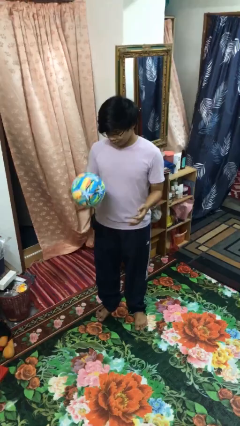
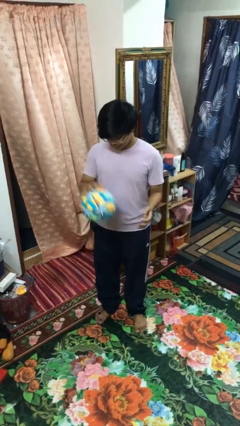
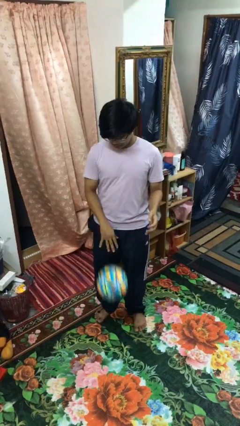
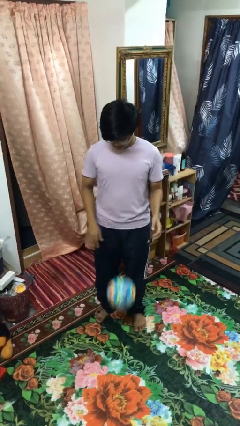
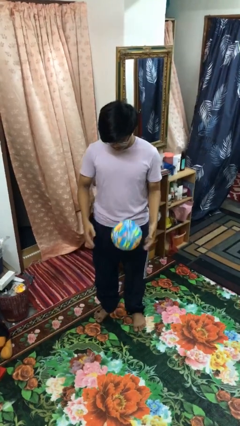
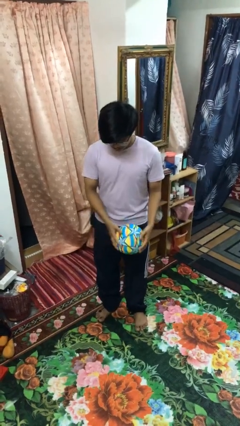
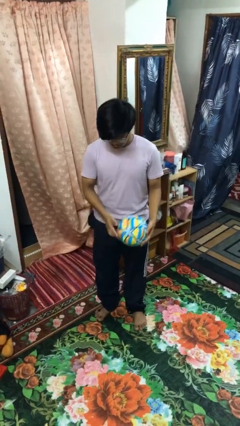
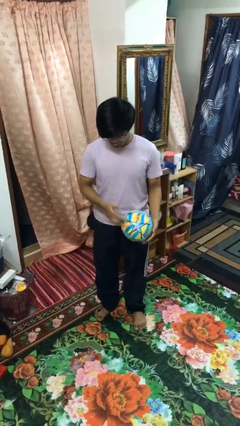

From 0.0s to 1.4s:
person bounces ball on floor

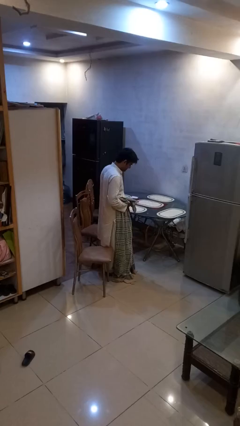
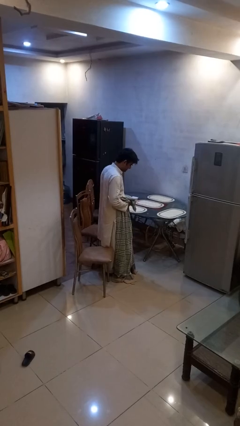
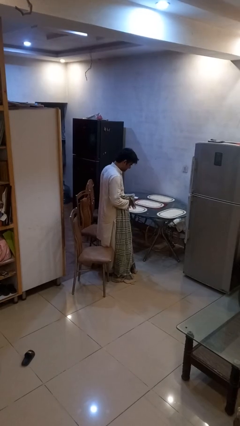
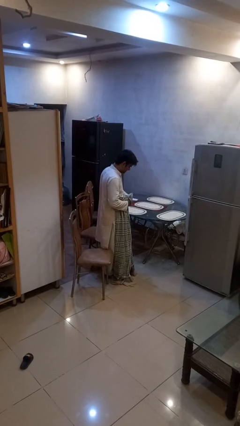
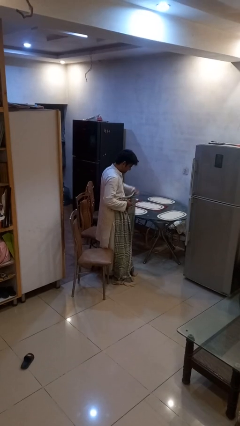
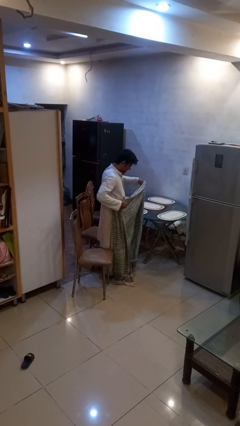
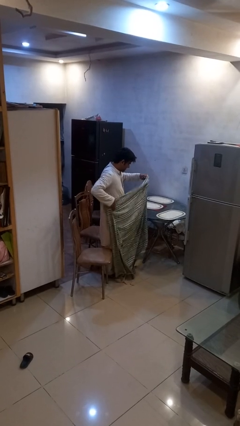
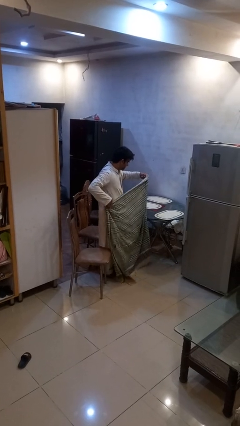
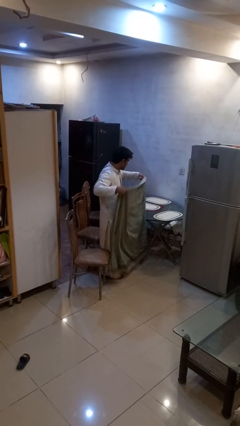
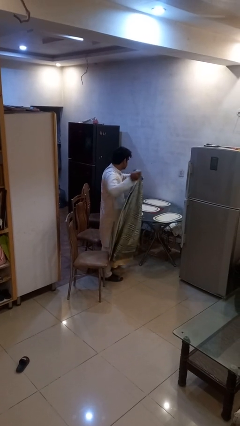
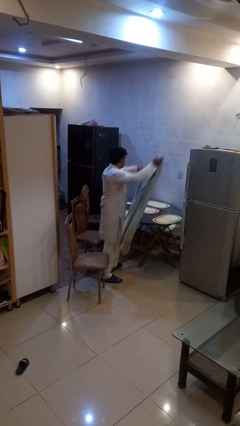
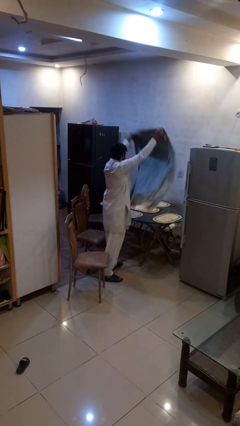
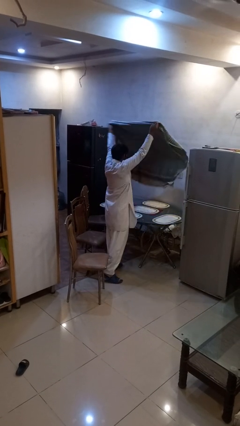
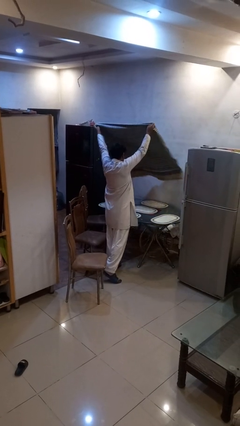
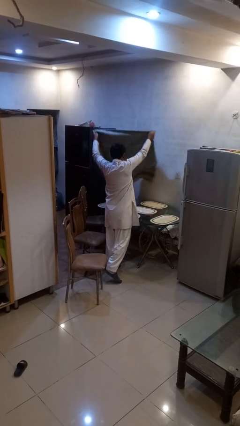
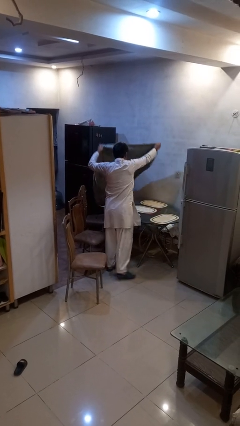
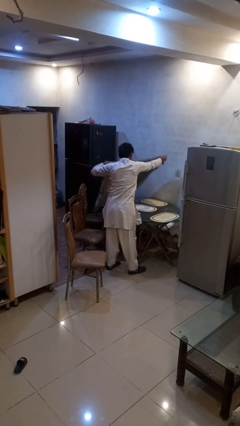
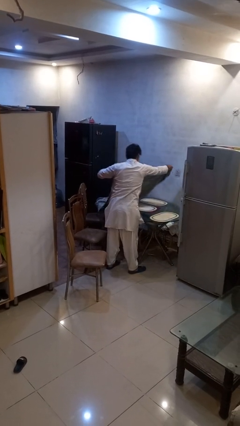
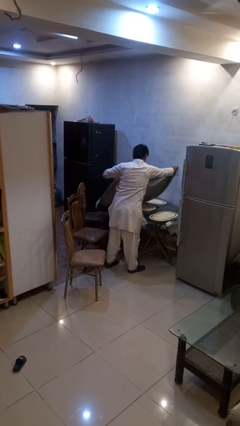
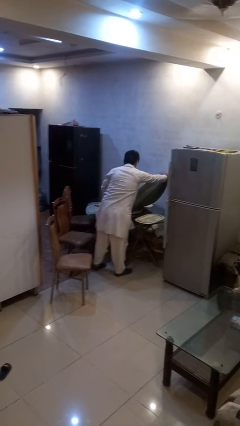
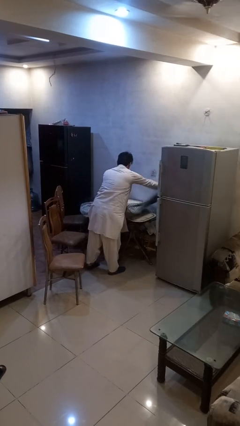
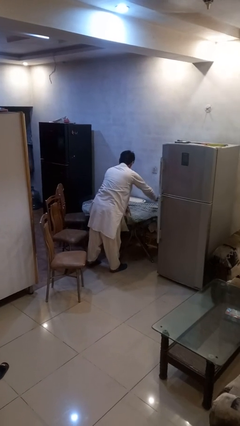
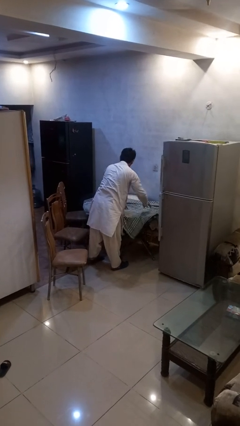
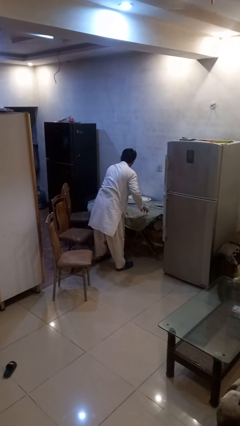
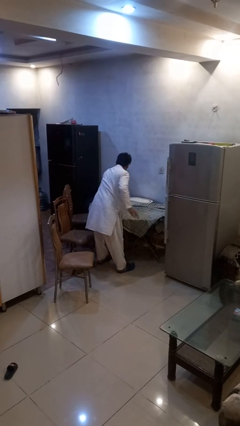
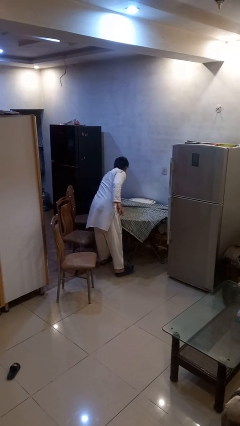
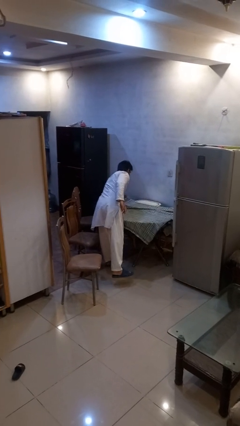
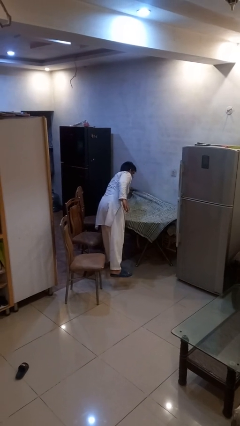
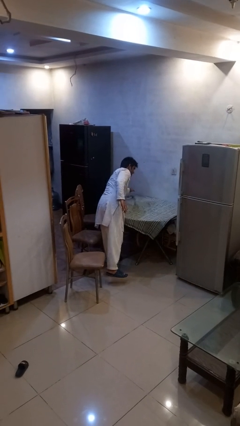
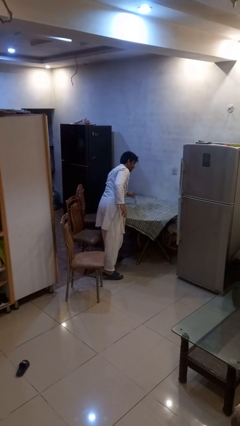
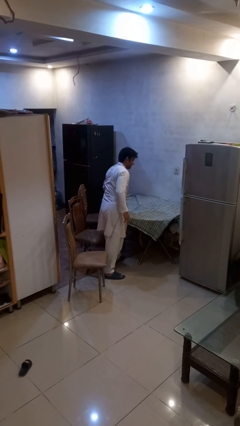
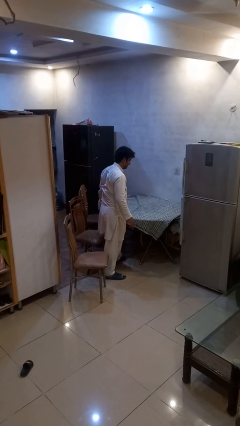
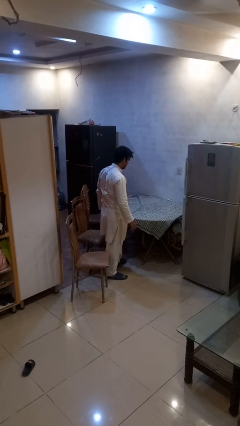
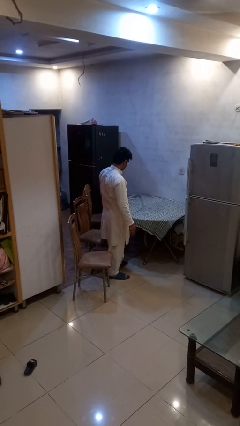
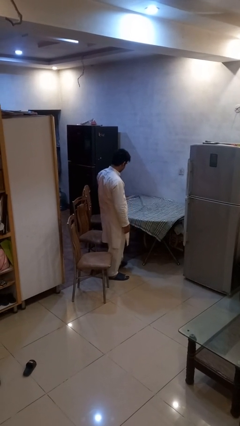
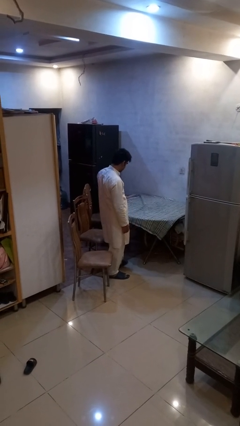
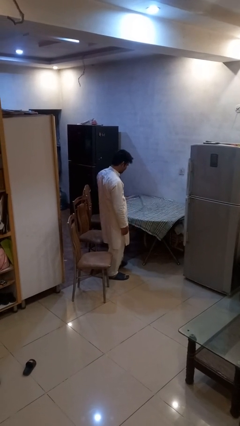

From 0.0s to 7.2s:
person spreads tablecloth

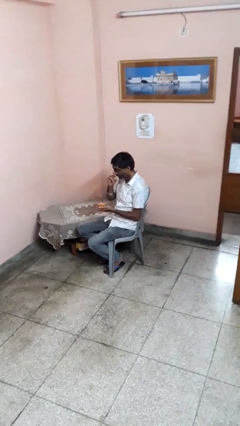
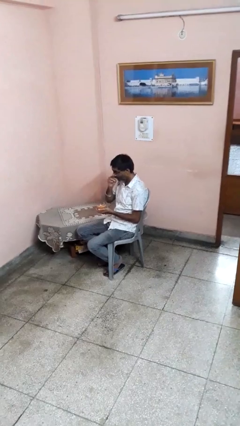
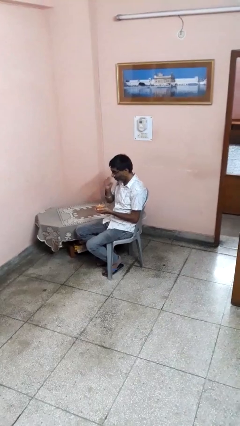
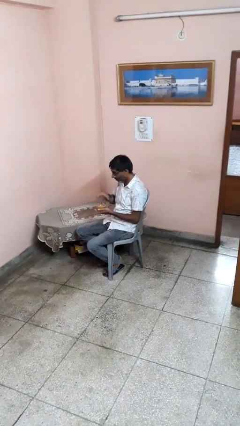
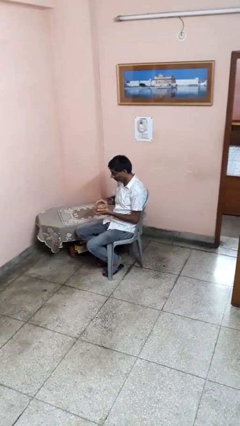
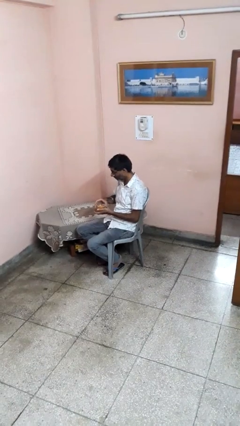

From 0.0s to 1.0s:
person eats with hands

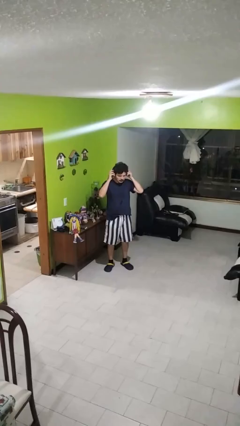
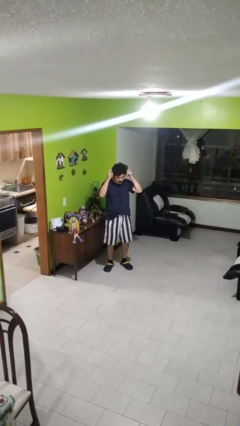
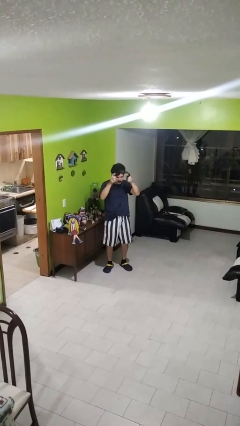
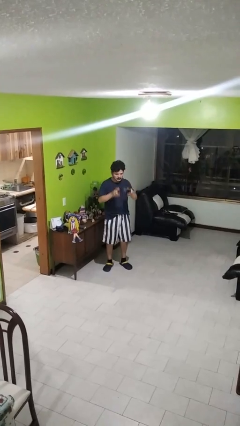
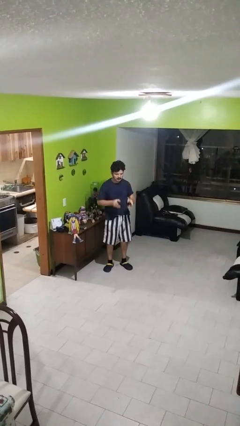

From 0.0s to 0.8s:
person takes off headphones

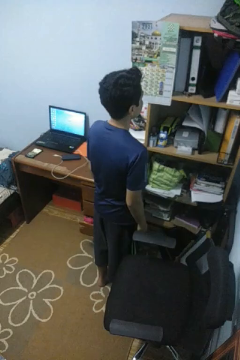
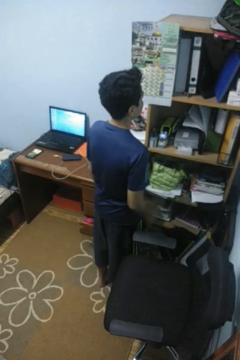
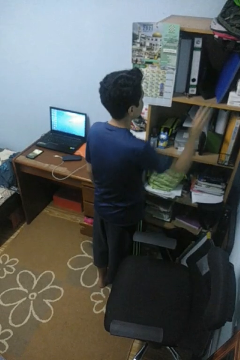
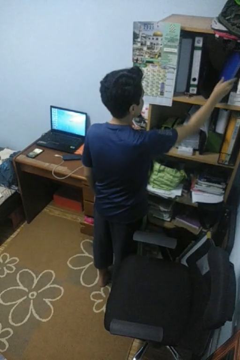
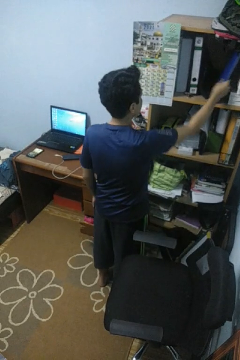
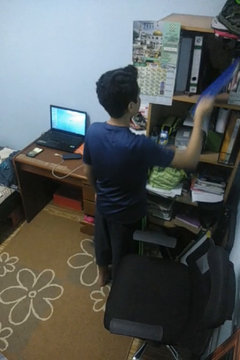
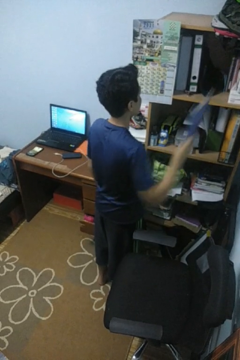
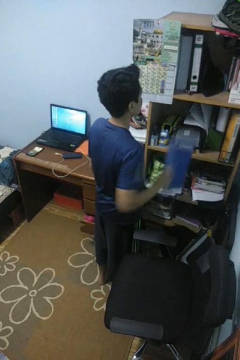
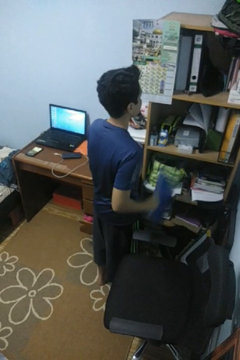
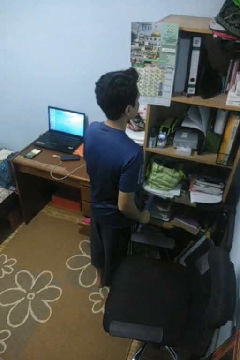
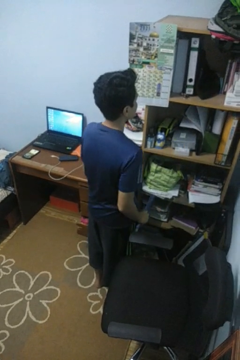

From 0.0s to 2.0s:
person picks up object from cabinet

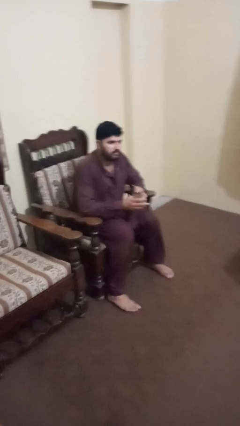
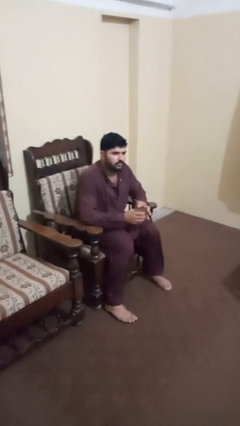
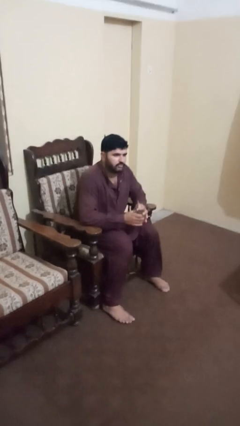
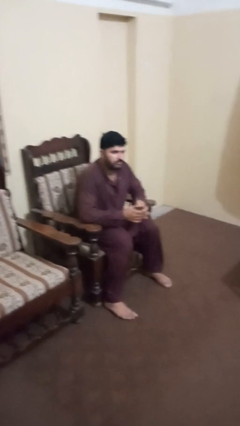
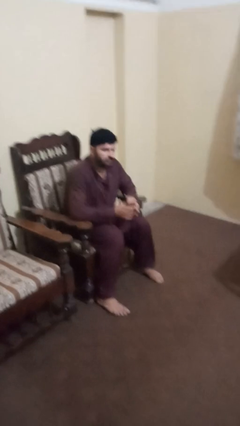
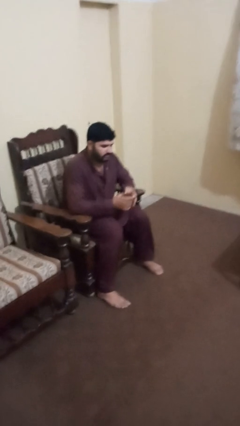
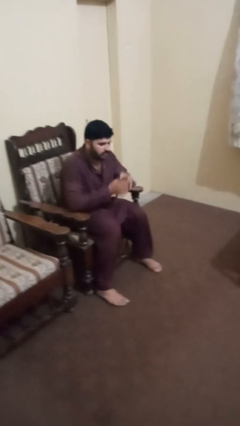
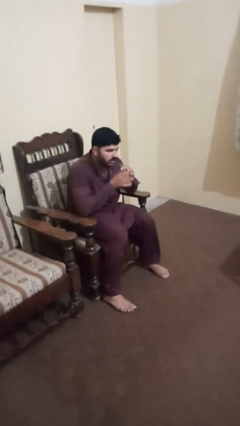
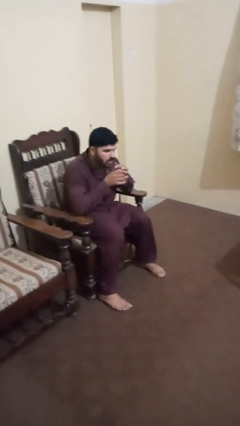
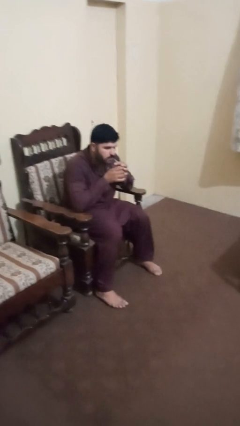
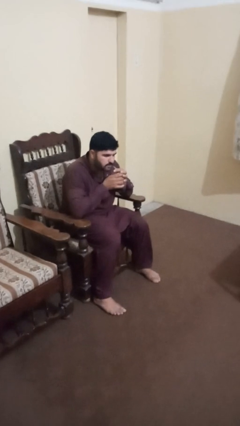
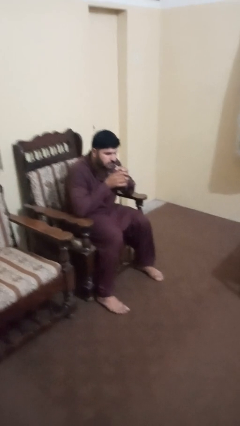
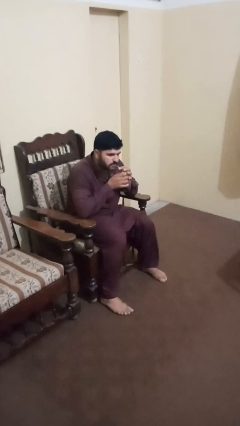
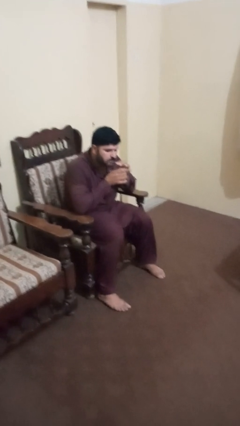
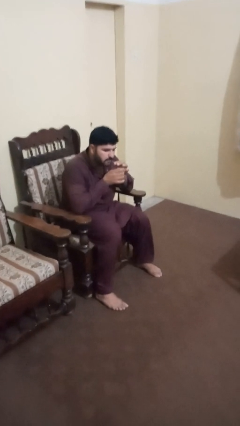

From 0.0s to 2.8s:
person drinks from straw

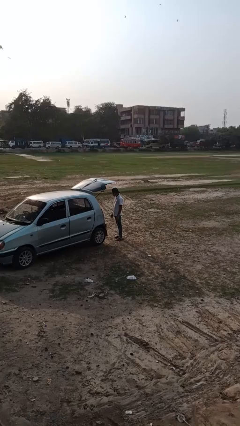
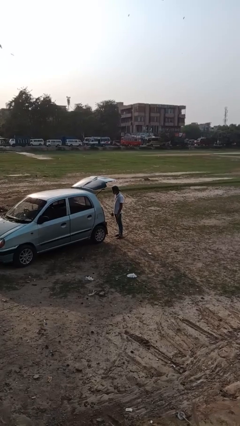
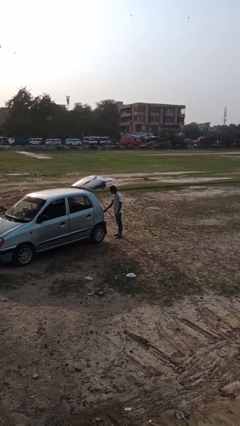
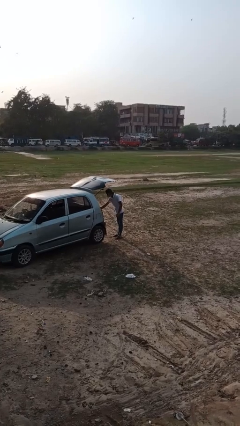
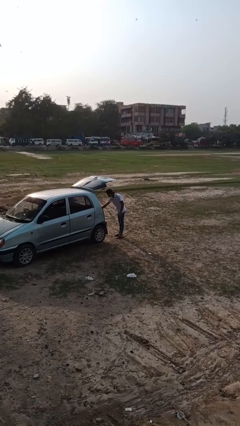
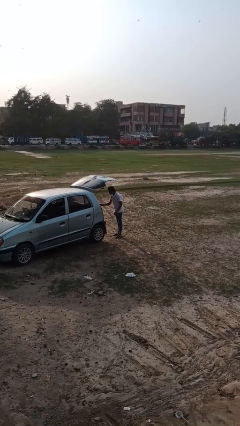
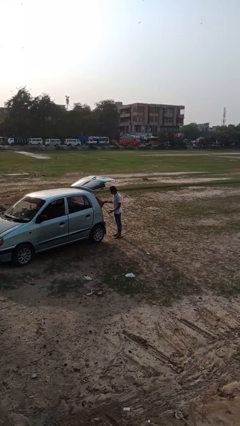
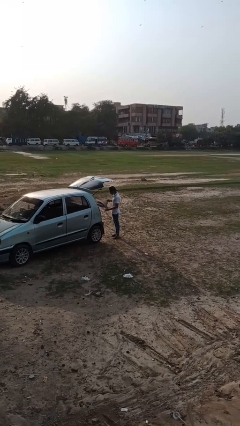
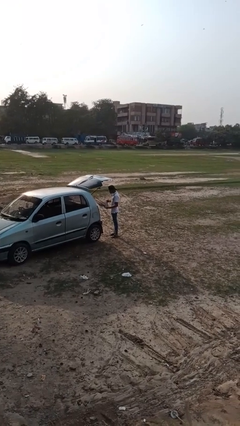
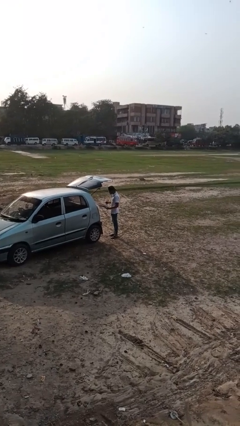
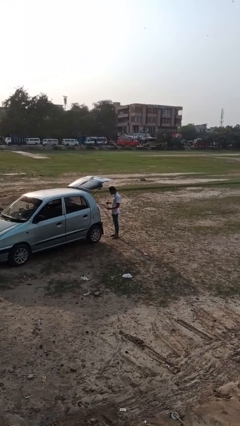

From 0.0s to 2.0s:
person unloads car

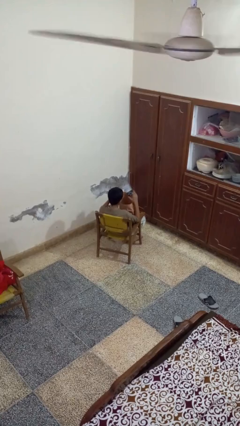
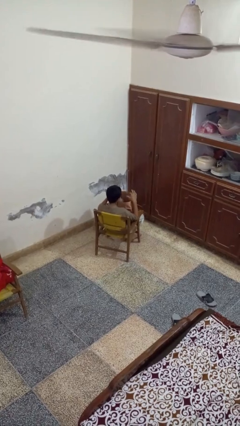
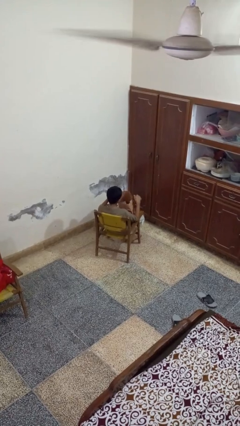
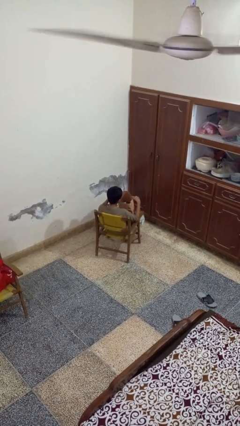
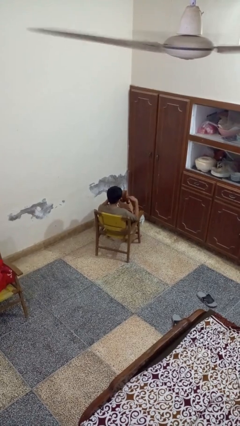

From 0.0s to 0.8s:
person puts object into bag
